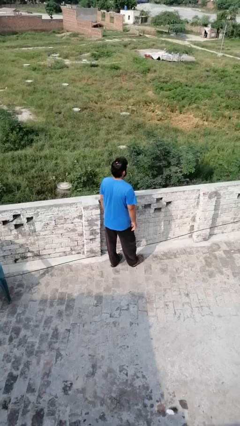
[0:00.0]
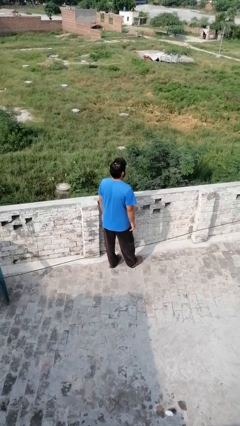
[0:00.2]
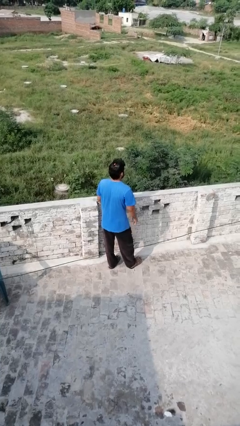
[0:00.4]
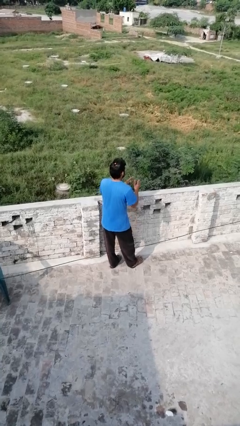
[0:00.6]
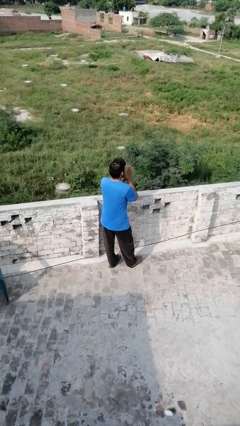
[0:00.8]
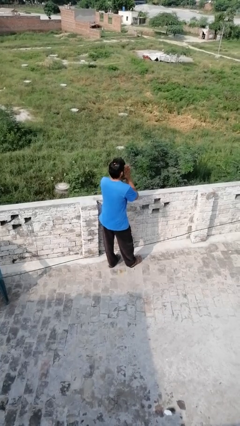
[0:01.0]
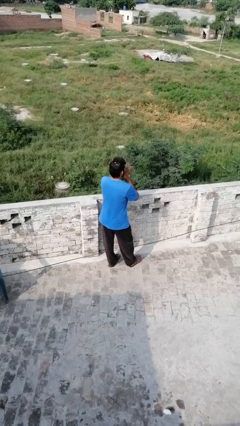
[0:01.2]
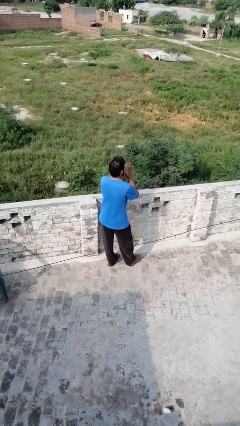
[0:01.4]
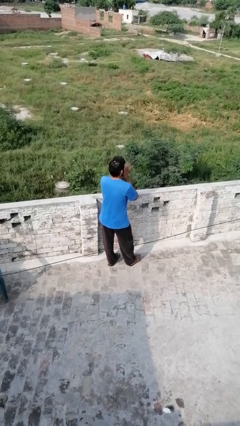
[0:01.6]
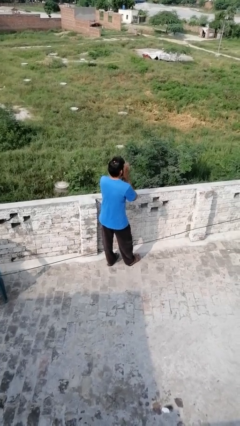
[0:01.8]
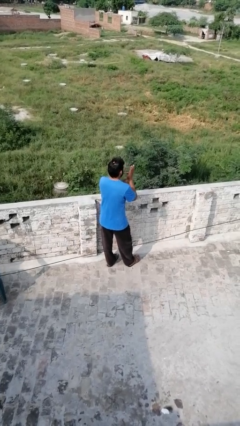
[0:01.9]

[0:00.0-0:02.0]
person blows into hands

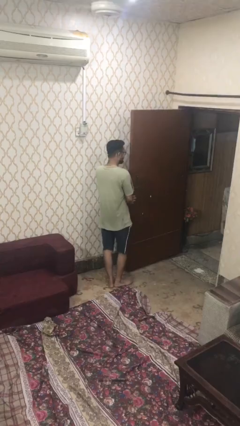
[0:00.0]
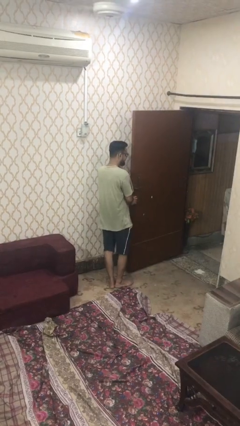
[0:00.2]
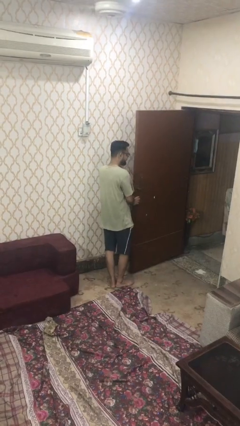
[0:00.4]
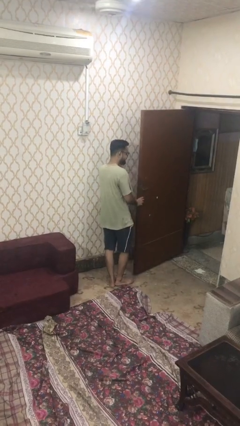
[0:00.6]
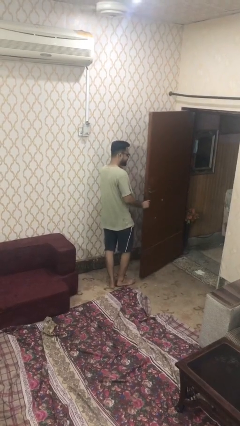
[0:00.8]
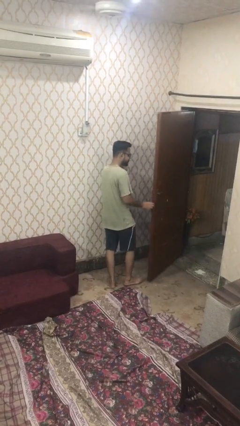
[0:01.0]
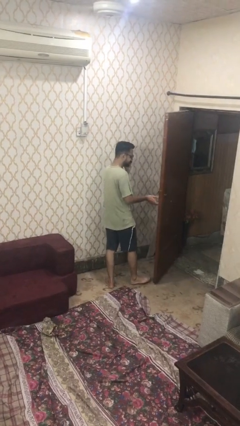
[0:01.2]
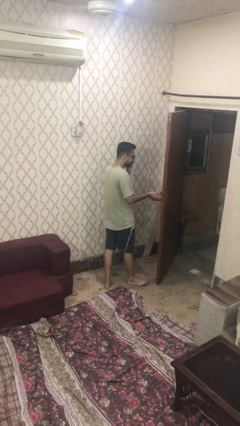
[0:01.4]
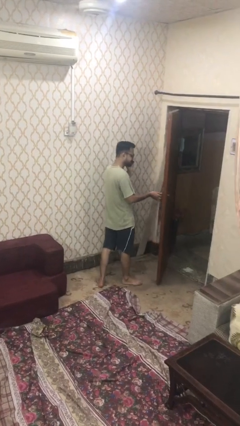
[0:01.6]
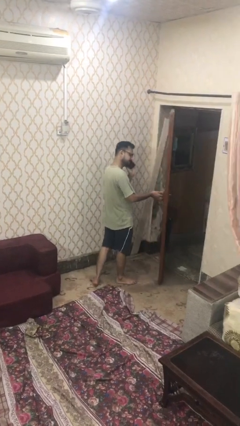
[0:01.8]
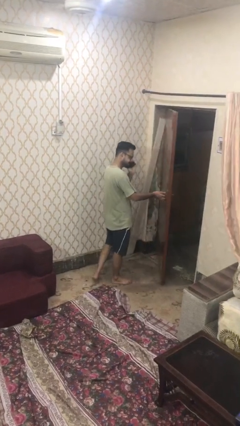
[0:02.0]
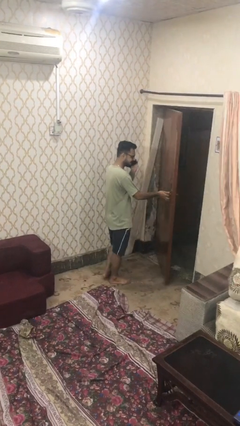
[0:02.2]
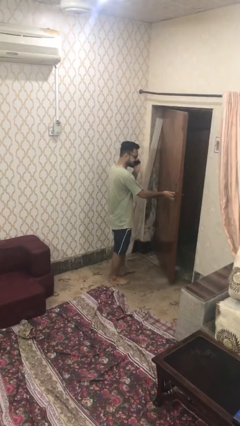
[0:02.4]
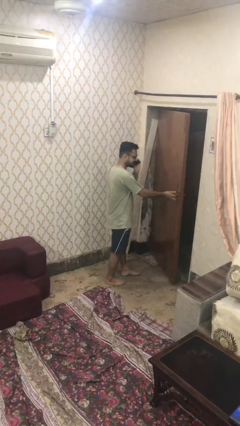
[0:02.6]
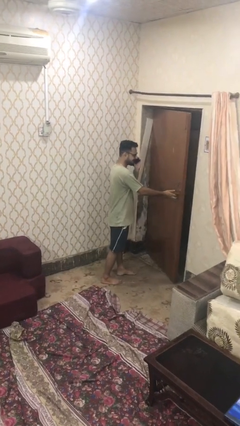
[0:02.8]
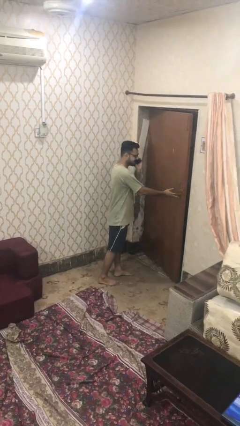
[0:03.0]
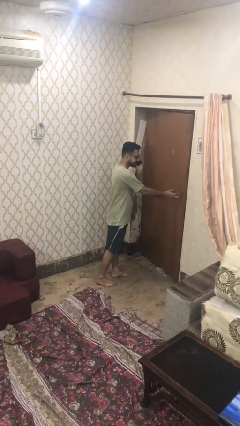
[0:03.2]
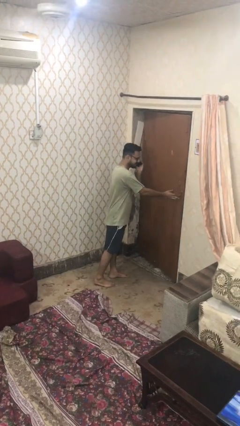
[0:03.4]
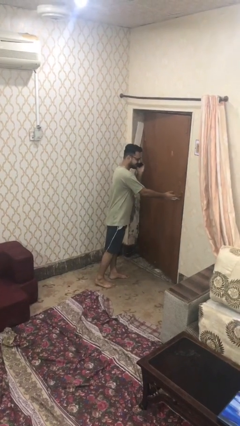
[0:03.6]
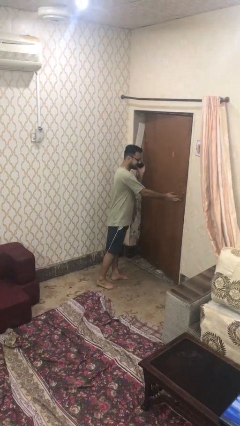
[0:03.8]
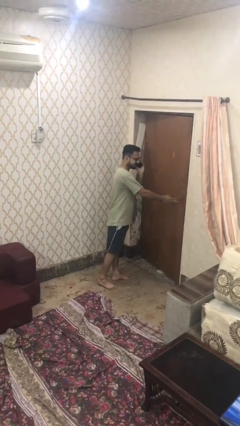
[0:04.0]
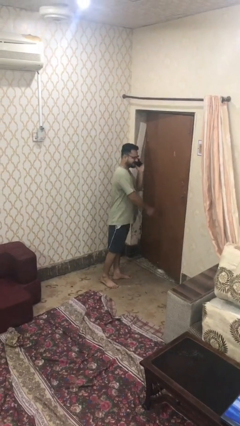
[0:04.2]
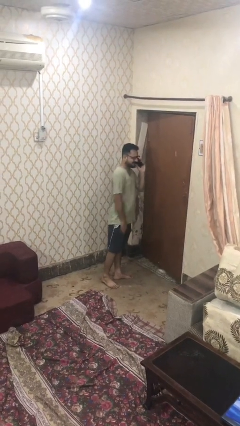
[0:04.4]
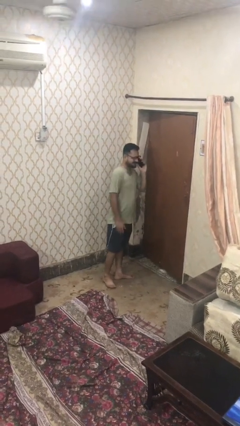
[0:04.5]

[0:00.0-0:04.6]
person closes facility door

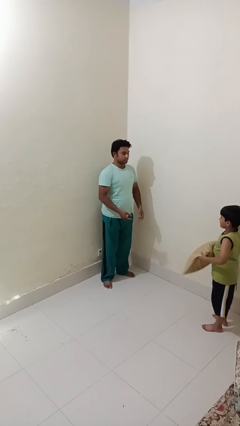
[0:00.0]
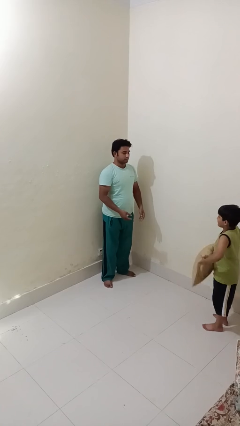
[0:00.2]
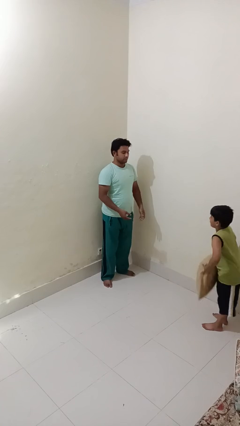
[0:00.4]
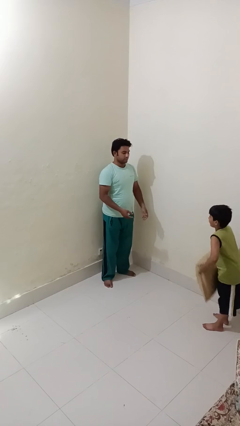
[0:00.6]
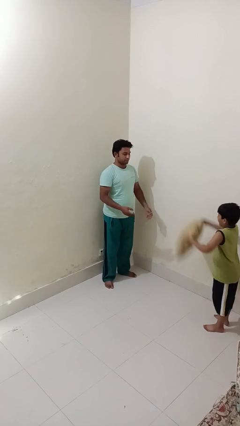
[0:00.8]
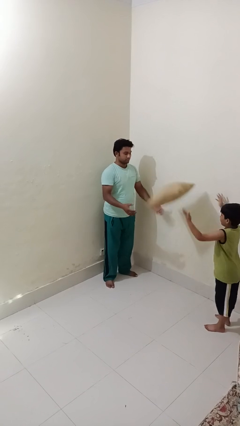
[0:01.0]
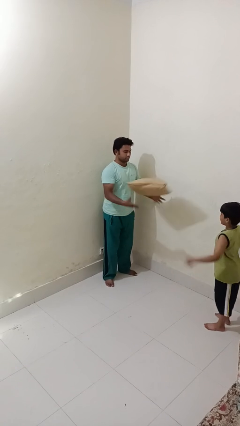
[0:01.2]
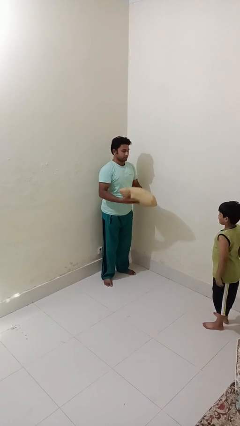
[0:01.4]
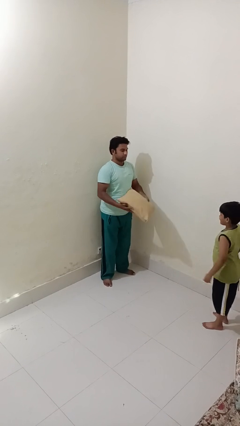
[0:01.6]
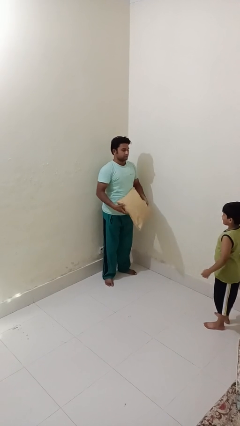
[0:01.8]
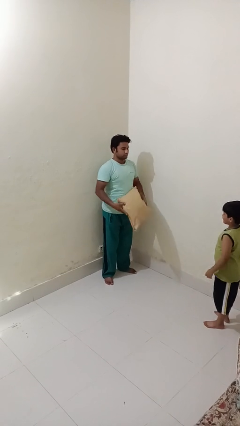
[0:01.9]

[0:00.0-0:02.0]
person catches object from person

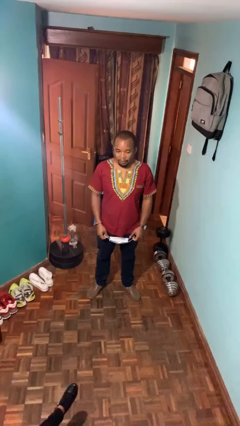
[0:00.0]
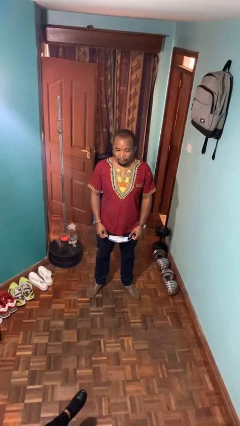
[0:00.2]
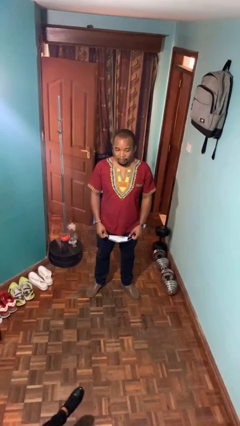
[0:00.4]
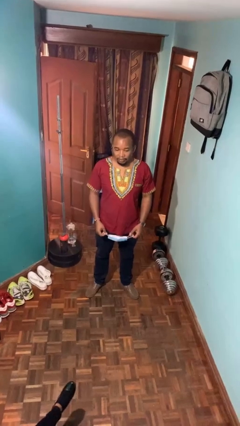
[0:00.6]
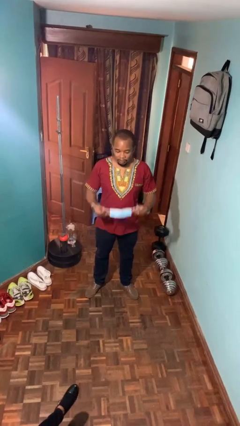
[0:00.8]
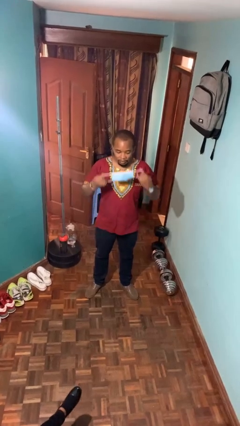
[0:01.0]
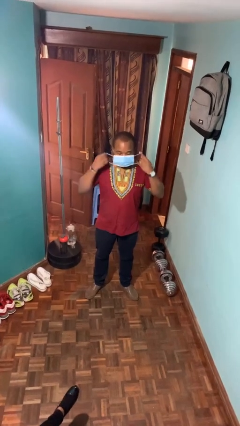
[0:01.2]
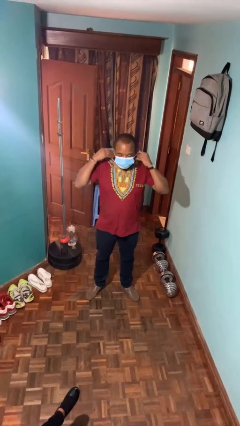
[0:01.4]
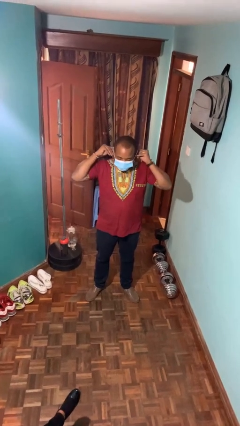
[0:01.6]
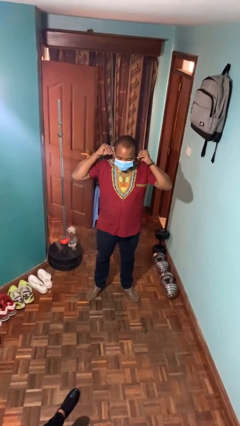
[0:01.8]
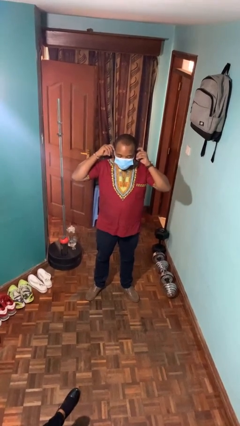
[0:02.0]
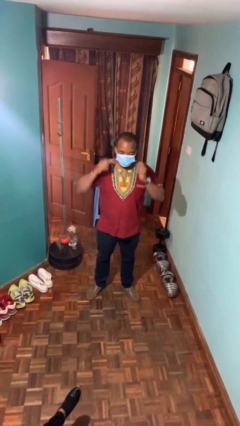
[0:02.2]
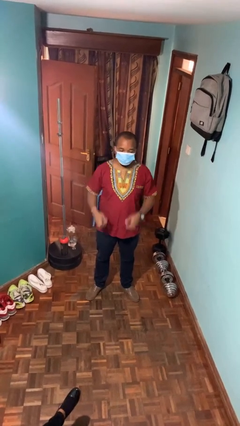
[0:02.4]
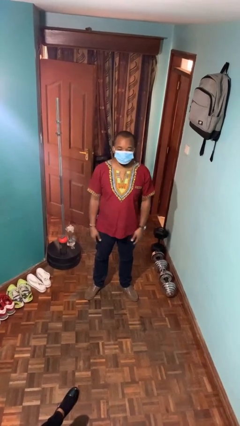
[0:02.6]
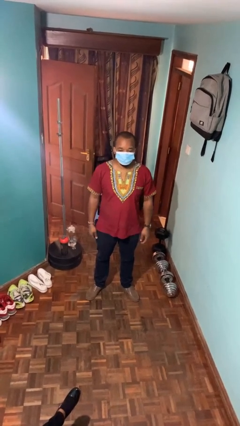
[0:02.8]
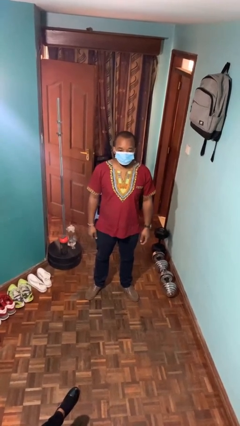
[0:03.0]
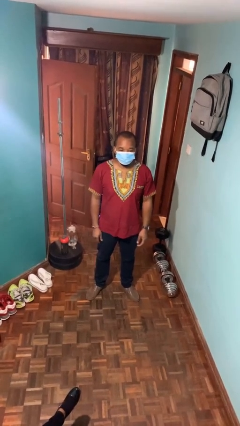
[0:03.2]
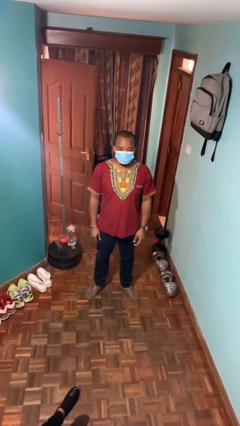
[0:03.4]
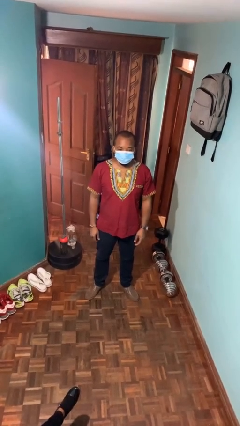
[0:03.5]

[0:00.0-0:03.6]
person puts on facemask

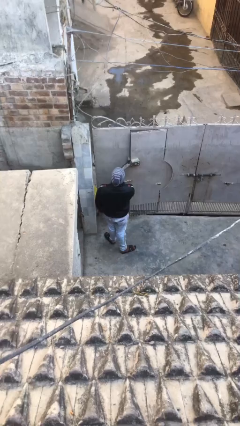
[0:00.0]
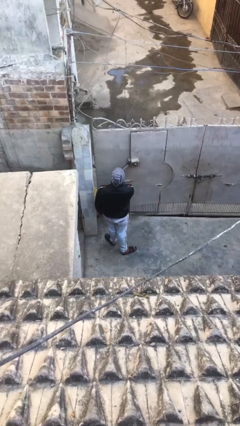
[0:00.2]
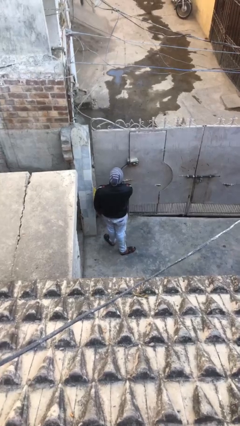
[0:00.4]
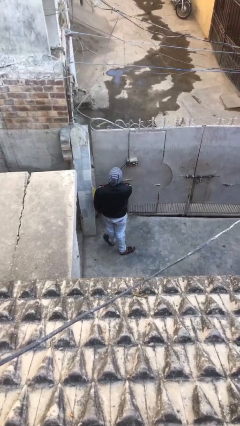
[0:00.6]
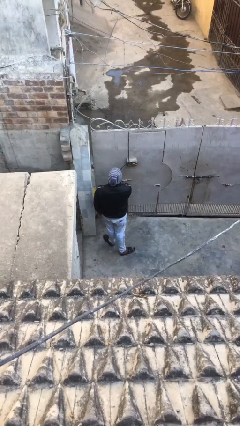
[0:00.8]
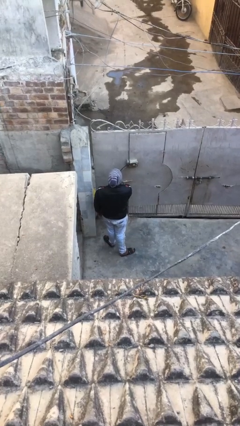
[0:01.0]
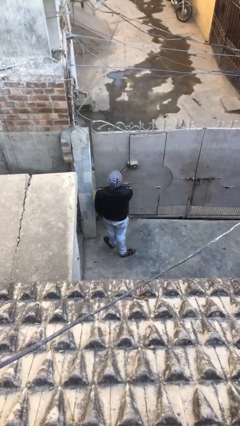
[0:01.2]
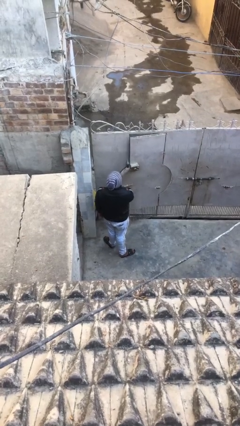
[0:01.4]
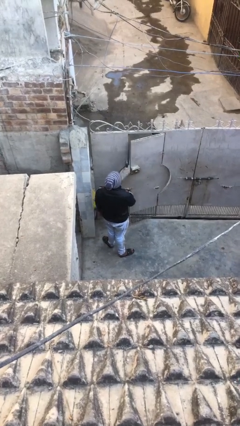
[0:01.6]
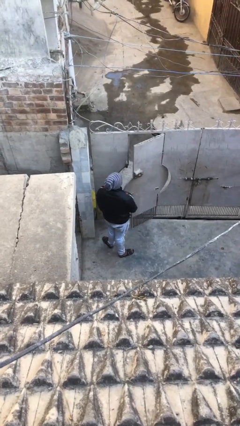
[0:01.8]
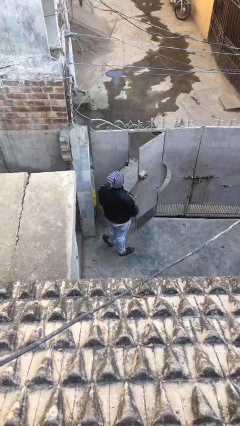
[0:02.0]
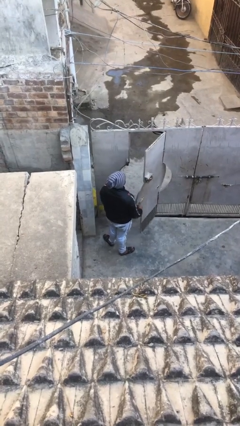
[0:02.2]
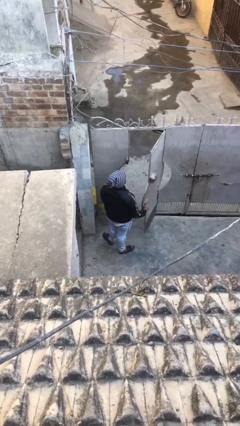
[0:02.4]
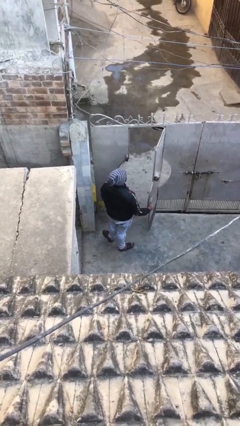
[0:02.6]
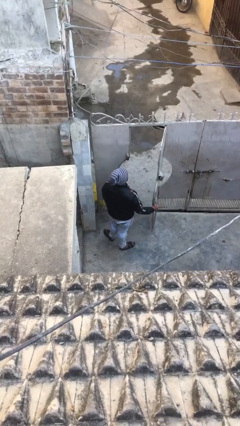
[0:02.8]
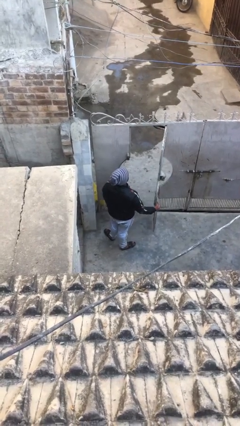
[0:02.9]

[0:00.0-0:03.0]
person opens facility door

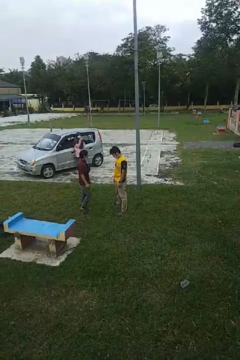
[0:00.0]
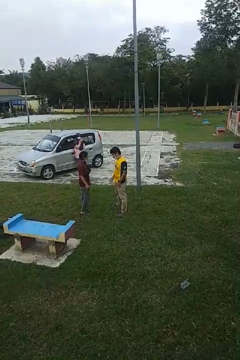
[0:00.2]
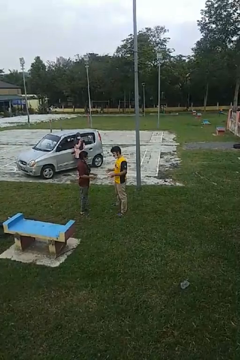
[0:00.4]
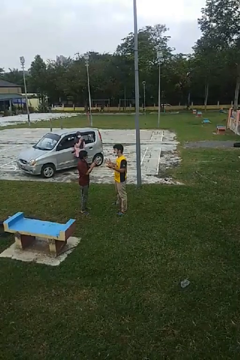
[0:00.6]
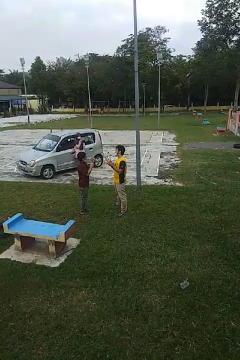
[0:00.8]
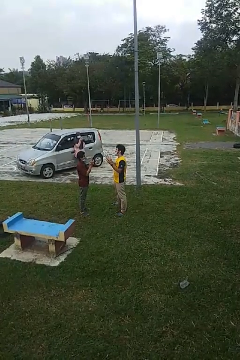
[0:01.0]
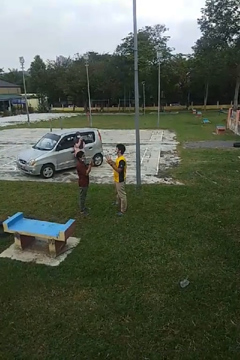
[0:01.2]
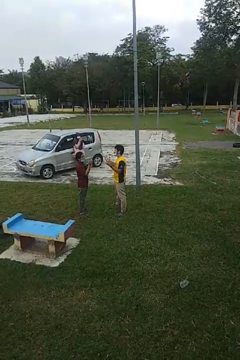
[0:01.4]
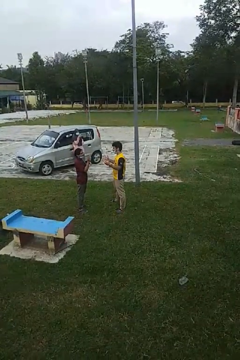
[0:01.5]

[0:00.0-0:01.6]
person talks to person

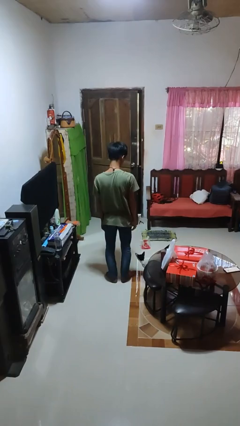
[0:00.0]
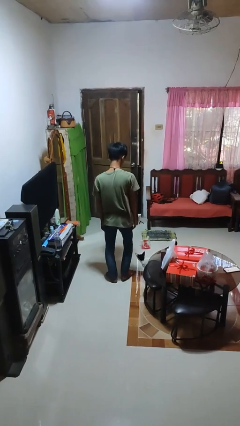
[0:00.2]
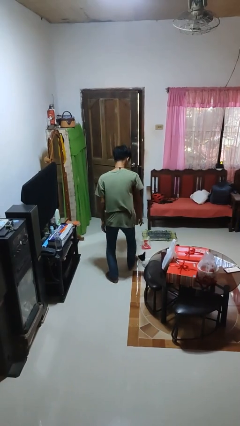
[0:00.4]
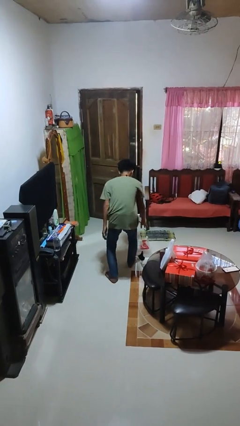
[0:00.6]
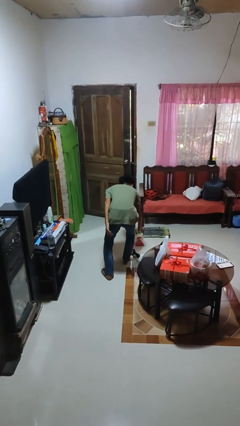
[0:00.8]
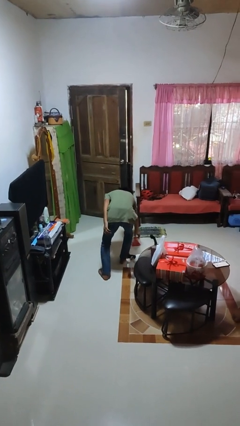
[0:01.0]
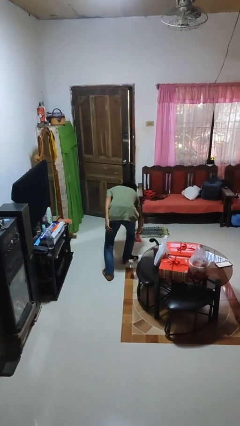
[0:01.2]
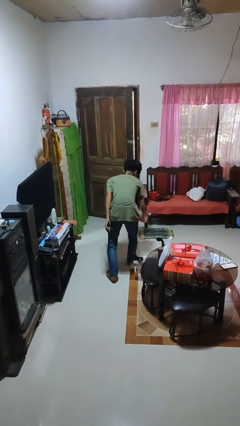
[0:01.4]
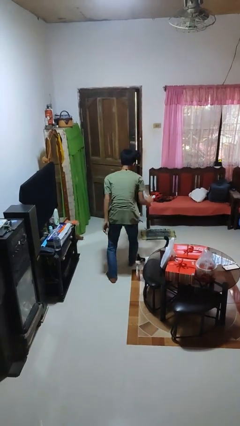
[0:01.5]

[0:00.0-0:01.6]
person picks up object from floor
